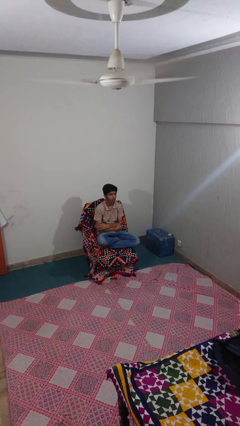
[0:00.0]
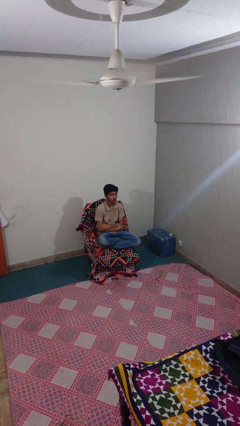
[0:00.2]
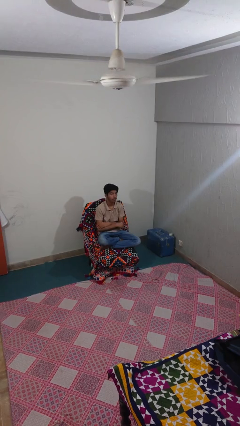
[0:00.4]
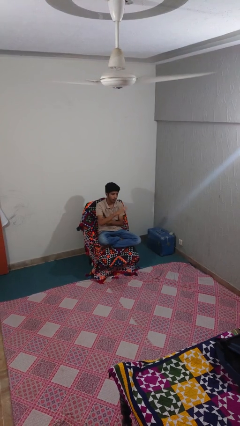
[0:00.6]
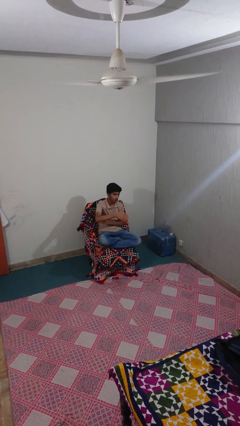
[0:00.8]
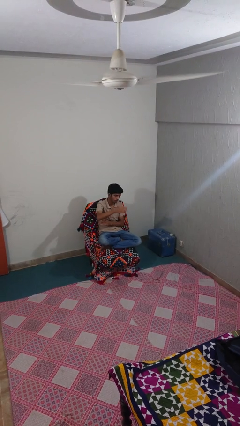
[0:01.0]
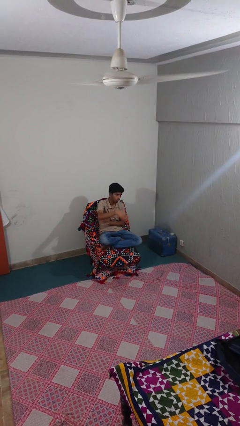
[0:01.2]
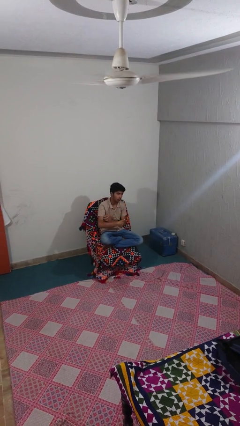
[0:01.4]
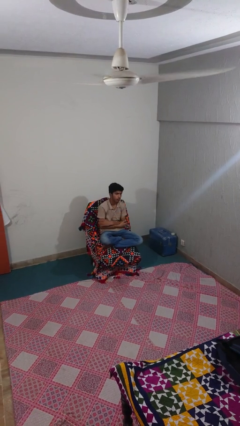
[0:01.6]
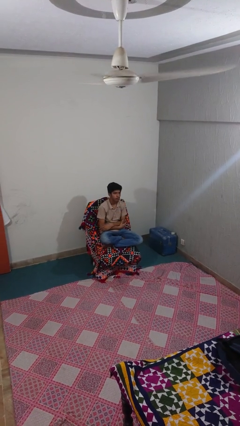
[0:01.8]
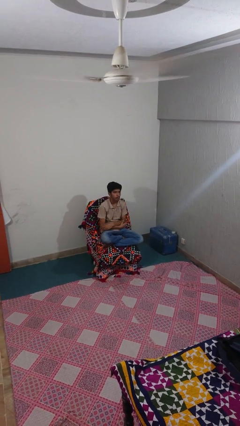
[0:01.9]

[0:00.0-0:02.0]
person gestures come here

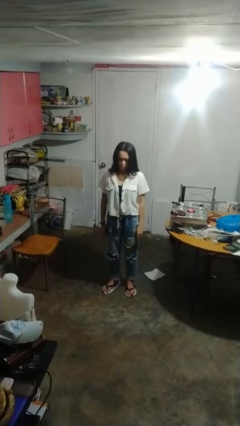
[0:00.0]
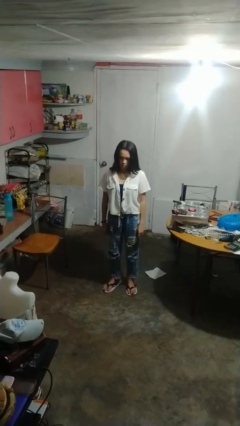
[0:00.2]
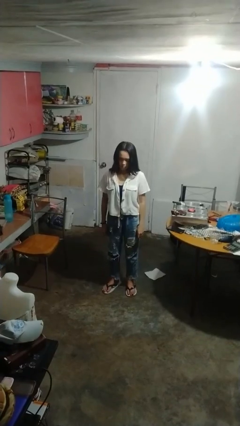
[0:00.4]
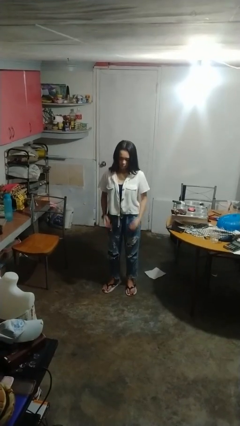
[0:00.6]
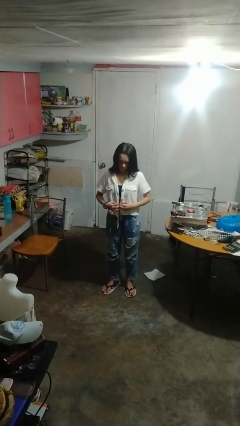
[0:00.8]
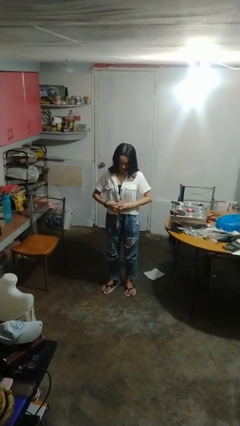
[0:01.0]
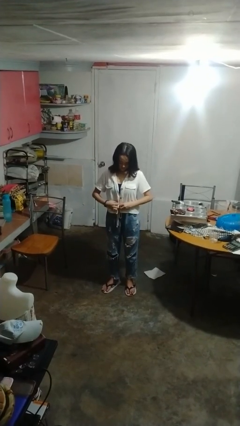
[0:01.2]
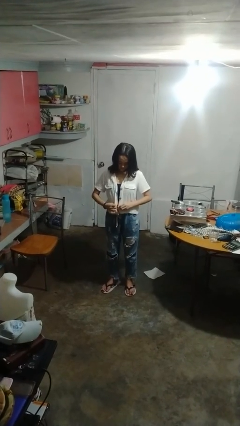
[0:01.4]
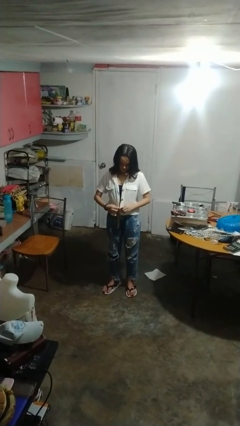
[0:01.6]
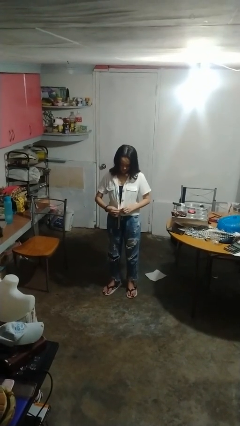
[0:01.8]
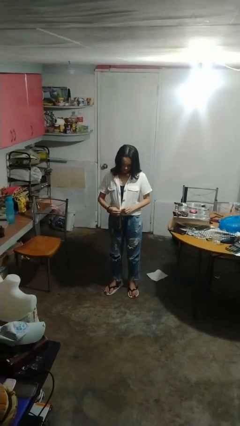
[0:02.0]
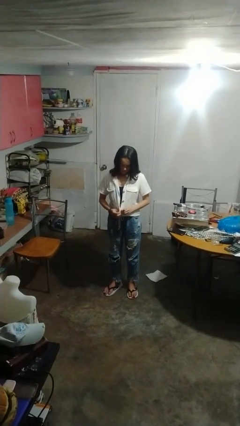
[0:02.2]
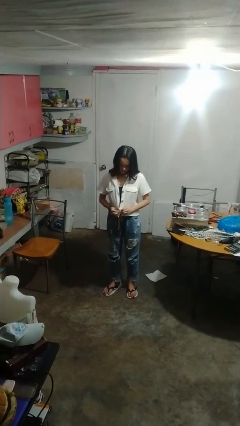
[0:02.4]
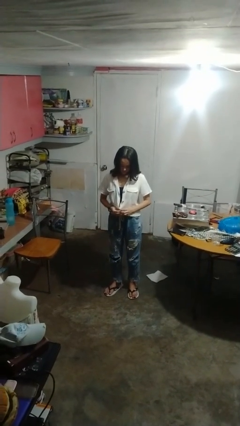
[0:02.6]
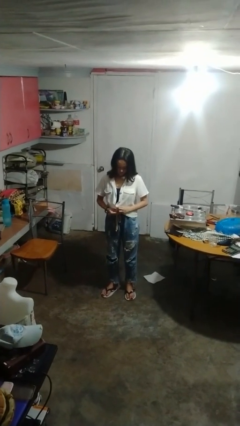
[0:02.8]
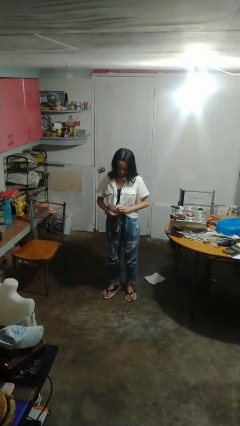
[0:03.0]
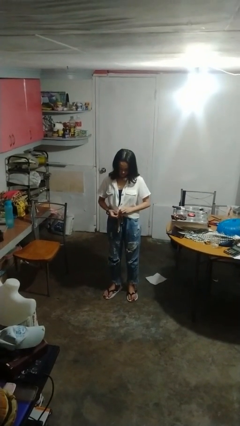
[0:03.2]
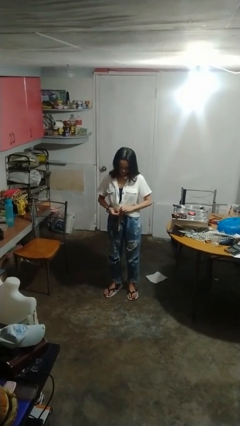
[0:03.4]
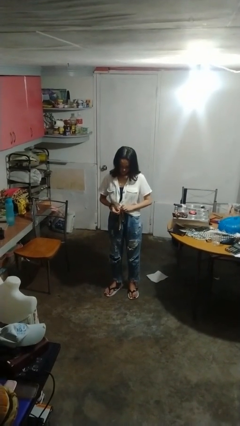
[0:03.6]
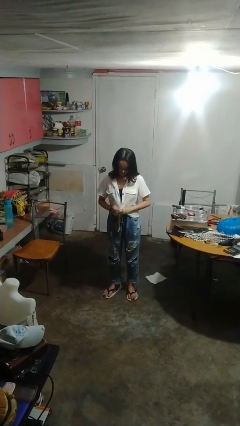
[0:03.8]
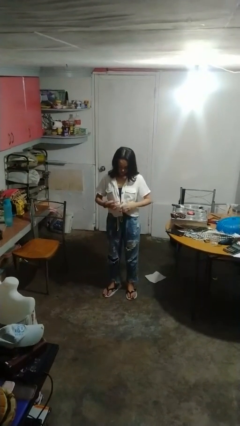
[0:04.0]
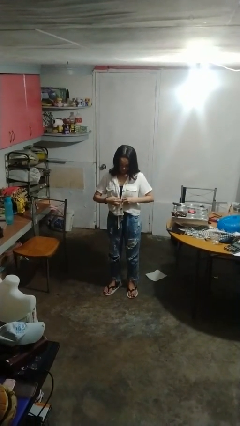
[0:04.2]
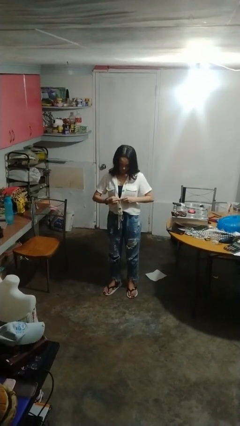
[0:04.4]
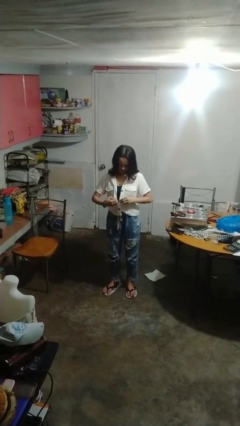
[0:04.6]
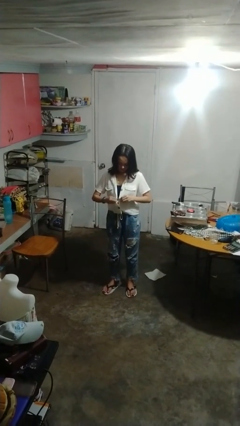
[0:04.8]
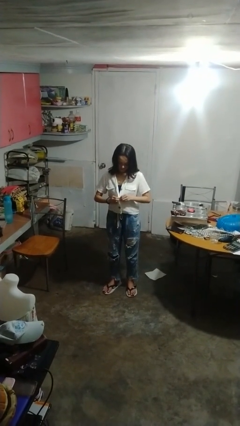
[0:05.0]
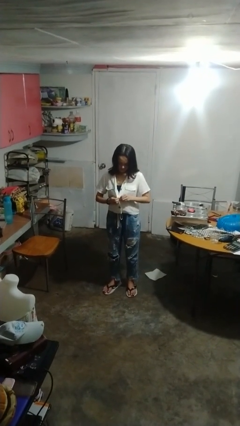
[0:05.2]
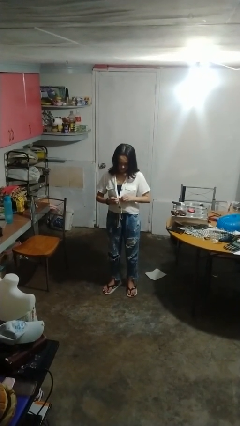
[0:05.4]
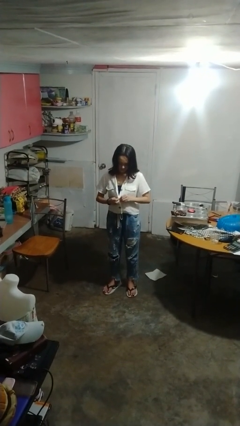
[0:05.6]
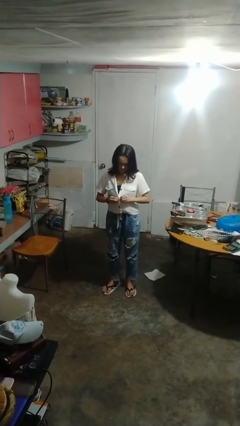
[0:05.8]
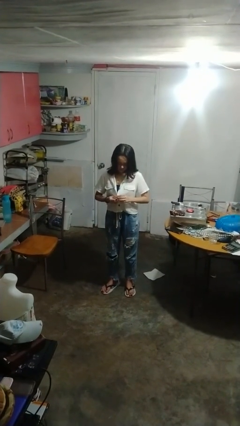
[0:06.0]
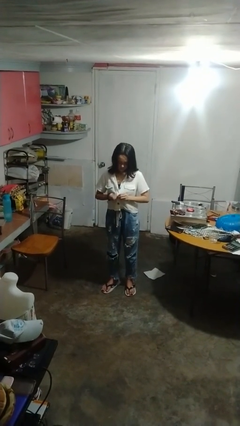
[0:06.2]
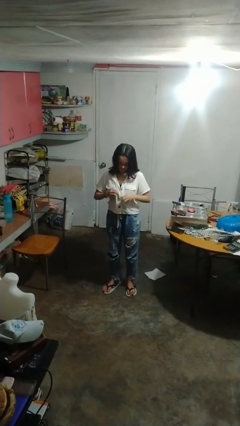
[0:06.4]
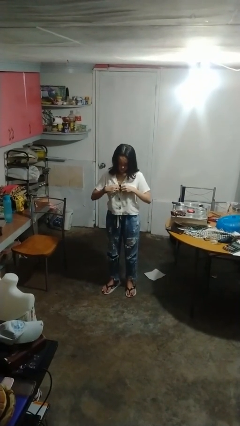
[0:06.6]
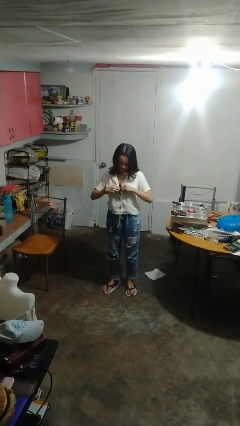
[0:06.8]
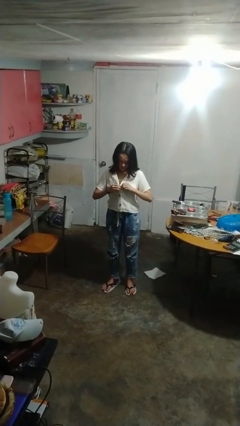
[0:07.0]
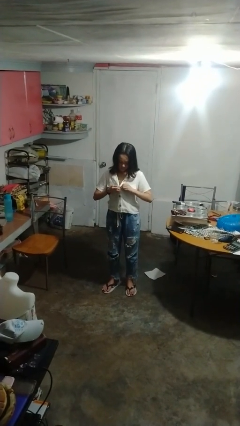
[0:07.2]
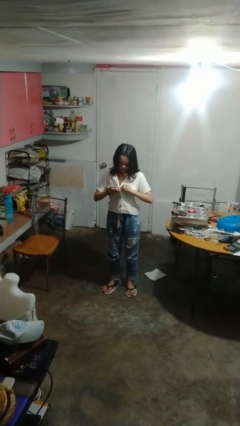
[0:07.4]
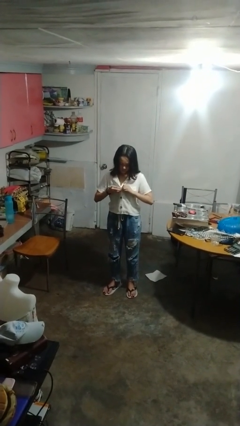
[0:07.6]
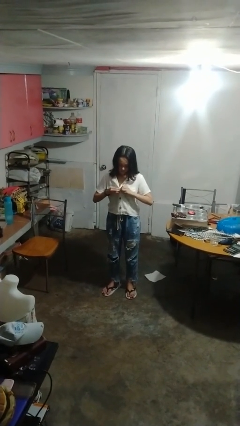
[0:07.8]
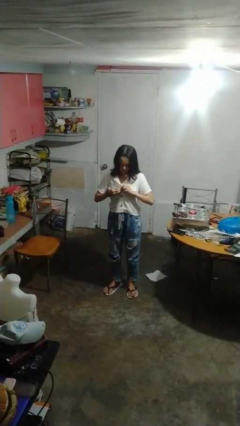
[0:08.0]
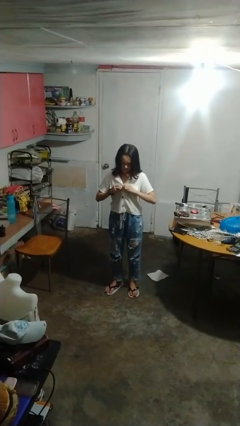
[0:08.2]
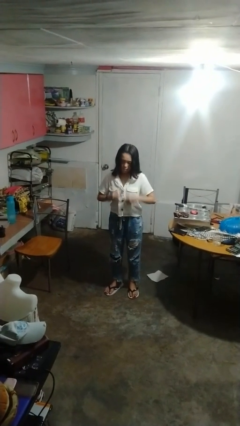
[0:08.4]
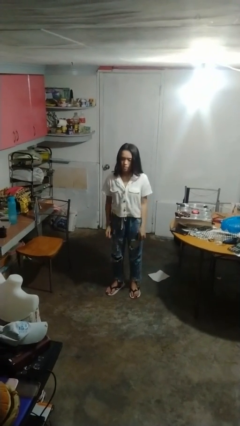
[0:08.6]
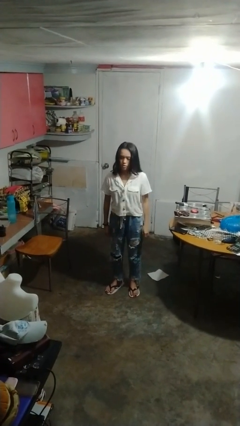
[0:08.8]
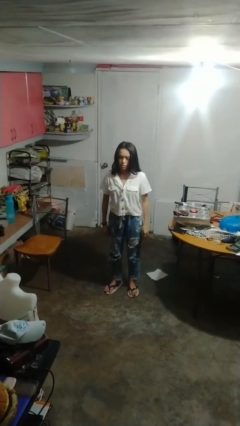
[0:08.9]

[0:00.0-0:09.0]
person buttons shirt

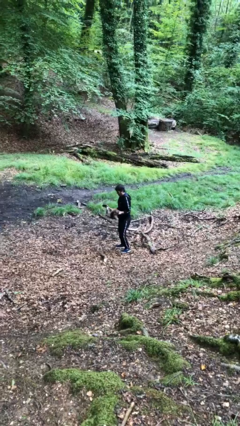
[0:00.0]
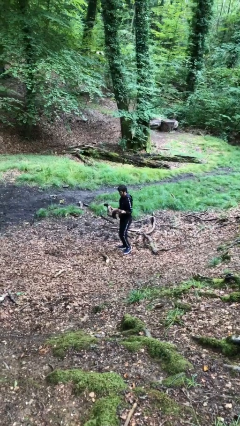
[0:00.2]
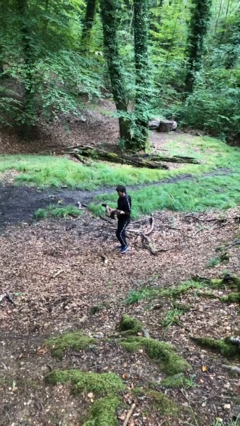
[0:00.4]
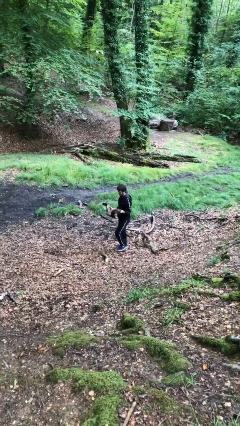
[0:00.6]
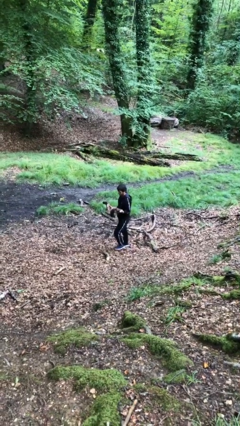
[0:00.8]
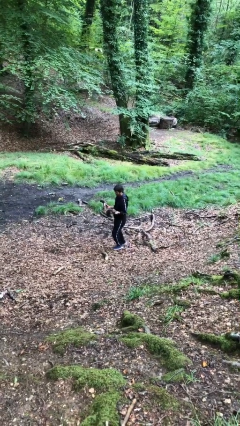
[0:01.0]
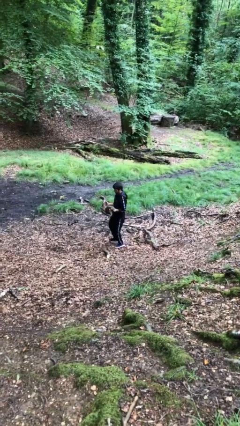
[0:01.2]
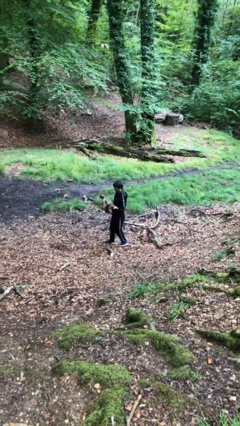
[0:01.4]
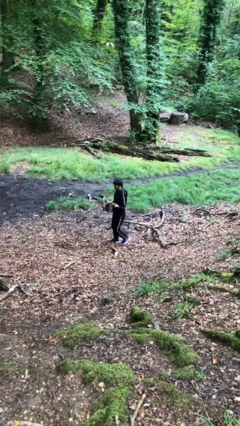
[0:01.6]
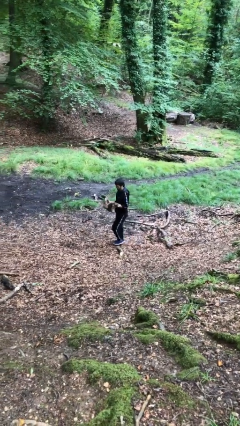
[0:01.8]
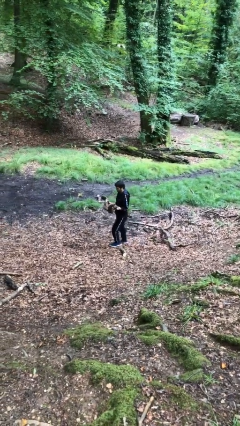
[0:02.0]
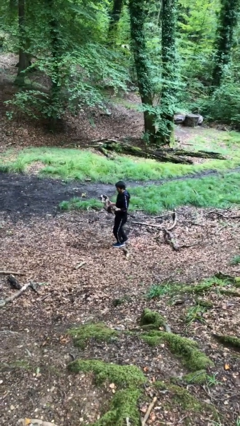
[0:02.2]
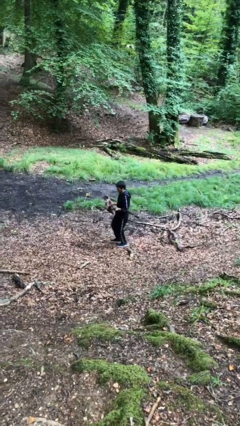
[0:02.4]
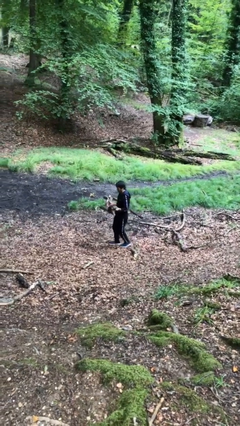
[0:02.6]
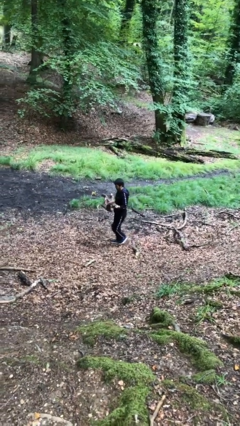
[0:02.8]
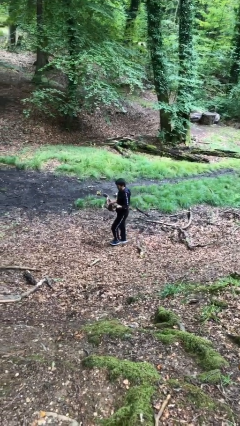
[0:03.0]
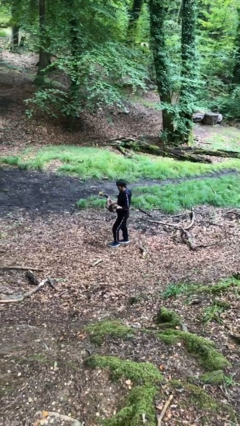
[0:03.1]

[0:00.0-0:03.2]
person carries heavy object

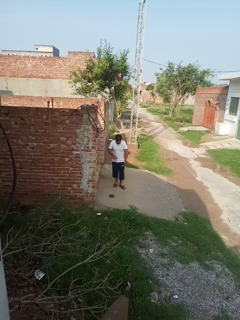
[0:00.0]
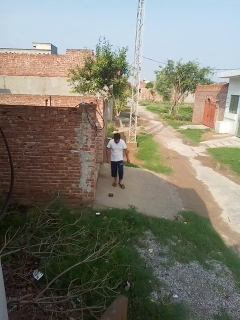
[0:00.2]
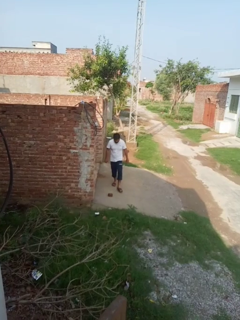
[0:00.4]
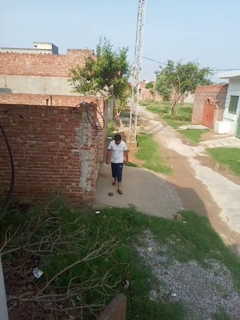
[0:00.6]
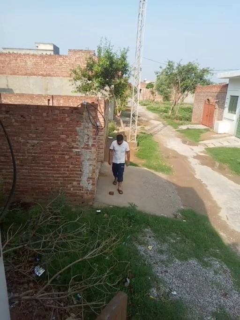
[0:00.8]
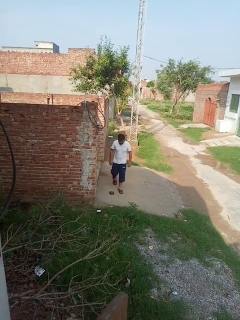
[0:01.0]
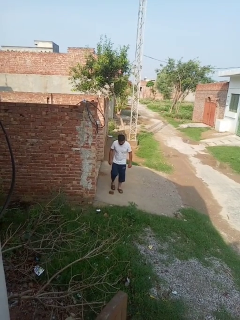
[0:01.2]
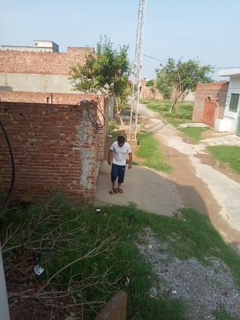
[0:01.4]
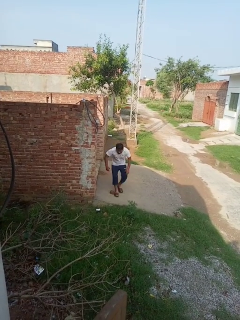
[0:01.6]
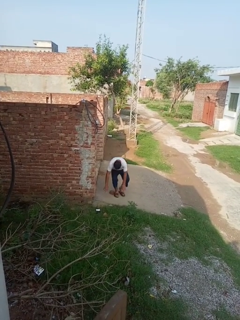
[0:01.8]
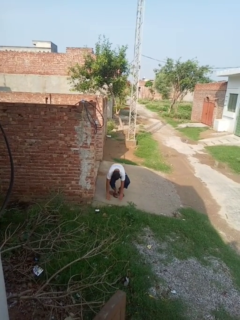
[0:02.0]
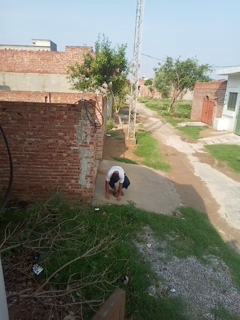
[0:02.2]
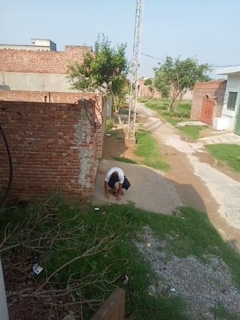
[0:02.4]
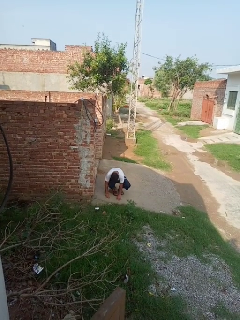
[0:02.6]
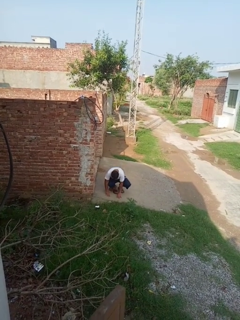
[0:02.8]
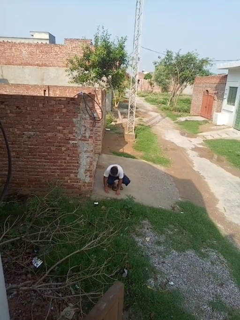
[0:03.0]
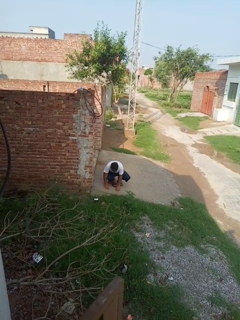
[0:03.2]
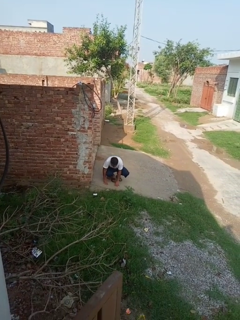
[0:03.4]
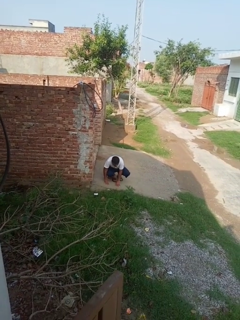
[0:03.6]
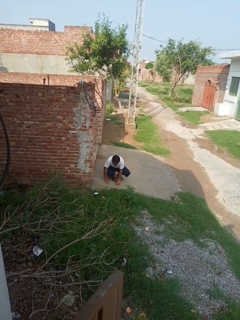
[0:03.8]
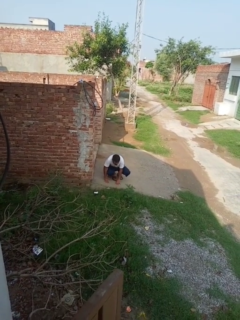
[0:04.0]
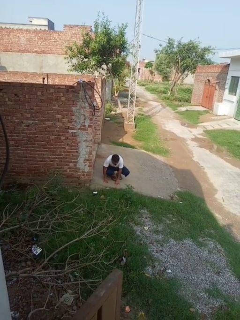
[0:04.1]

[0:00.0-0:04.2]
person trips on object on floor

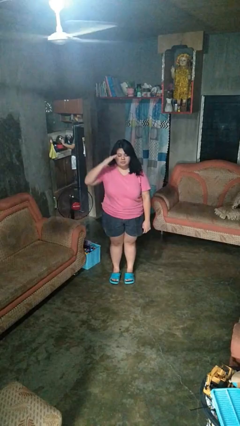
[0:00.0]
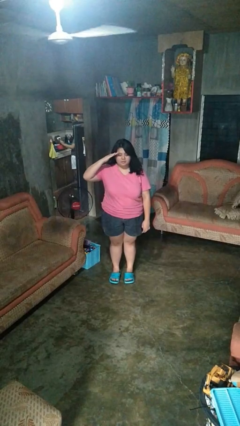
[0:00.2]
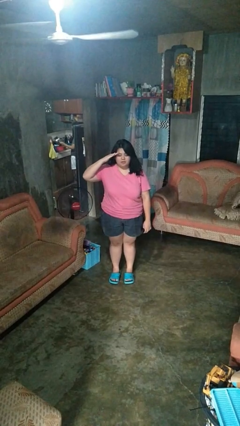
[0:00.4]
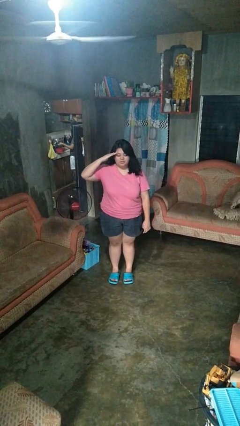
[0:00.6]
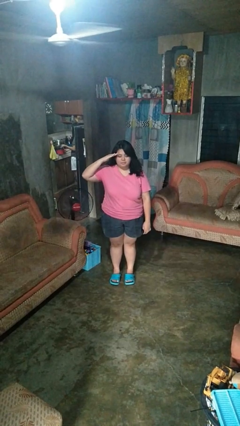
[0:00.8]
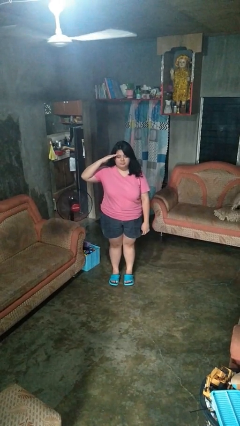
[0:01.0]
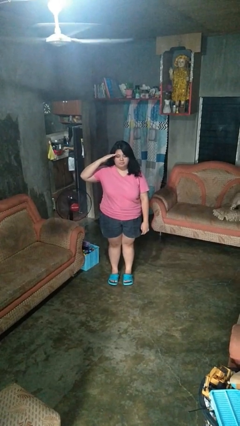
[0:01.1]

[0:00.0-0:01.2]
person salutes
